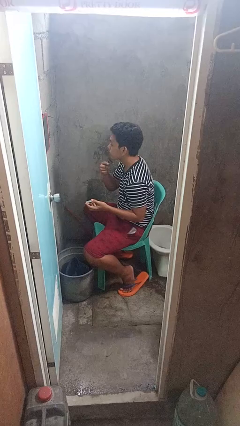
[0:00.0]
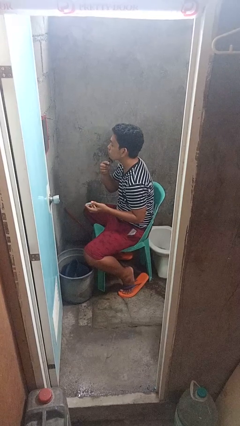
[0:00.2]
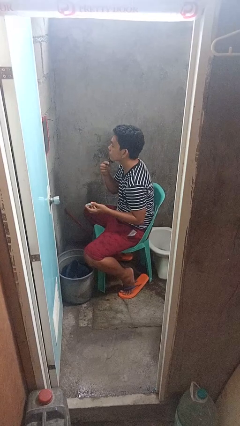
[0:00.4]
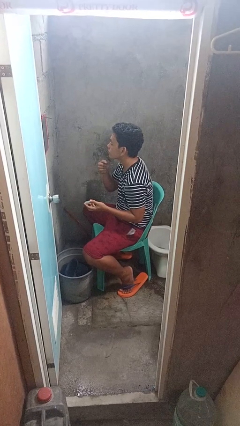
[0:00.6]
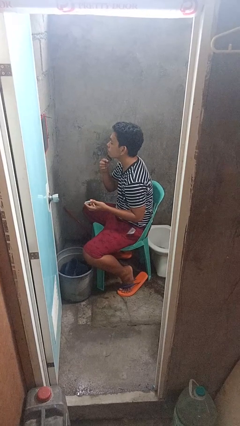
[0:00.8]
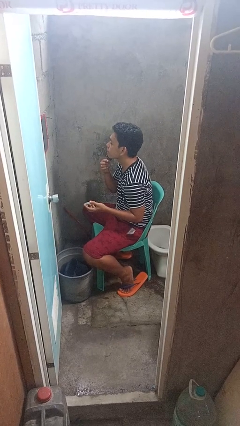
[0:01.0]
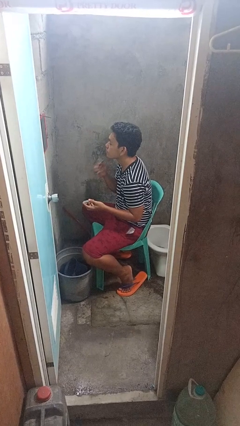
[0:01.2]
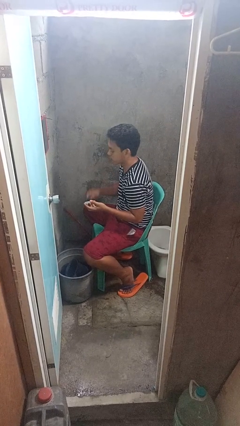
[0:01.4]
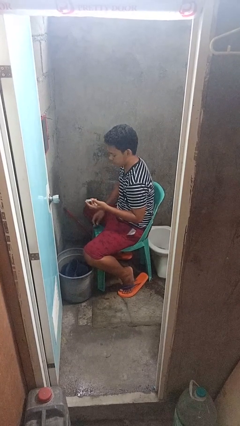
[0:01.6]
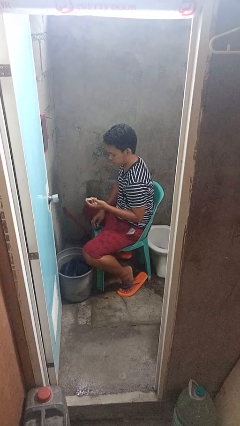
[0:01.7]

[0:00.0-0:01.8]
person shaves face

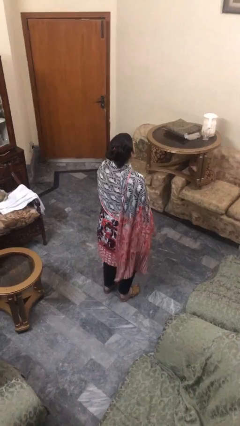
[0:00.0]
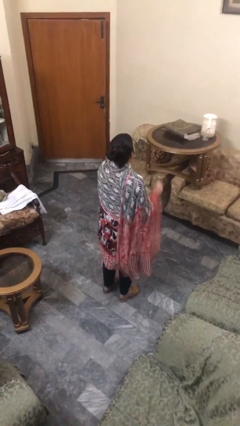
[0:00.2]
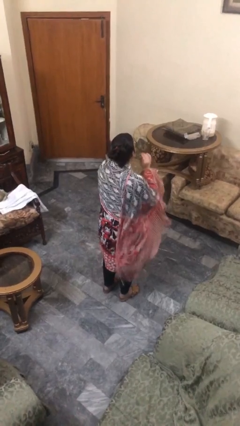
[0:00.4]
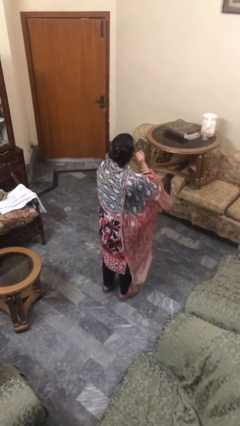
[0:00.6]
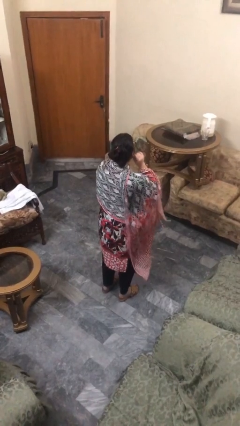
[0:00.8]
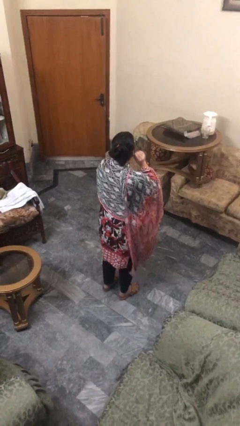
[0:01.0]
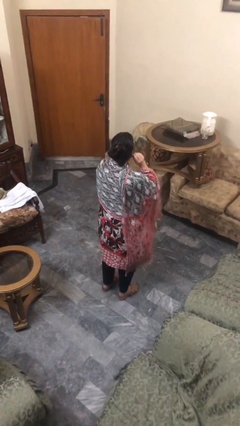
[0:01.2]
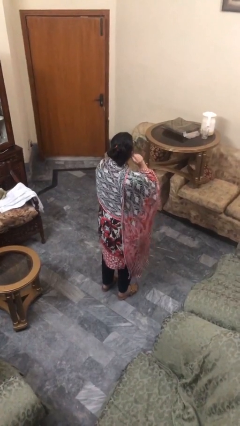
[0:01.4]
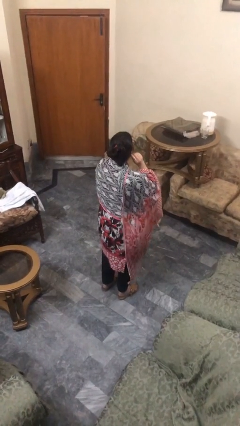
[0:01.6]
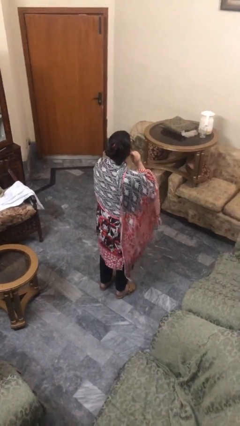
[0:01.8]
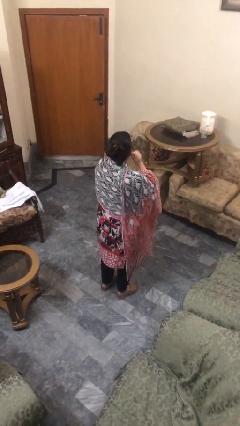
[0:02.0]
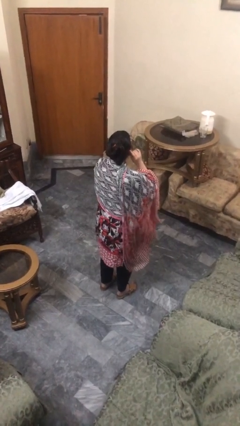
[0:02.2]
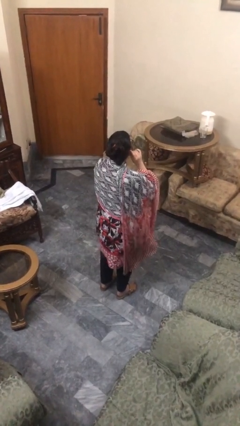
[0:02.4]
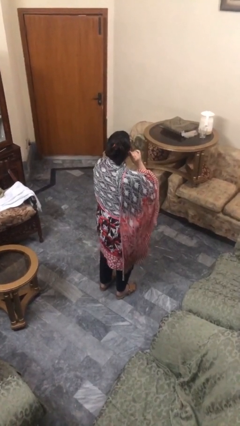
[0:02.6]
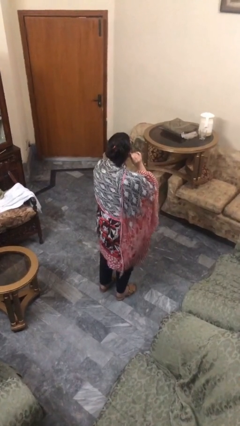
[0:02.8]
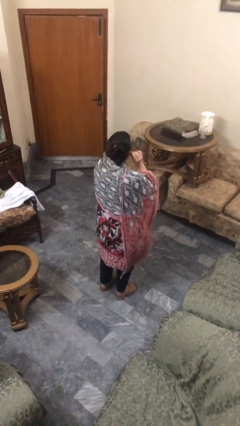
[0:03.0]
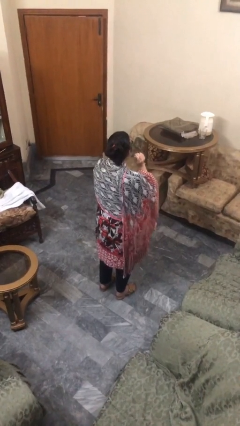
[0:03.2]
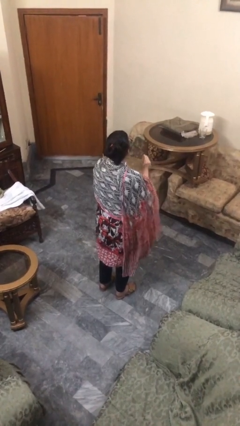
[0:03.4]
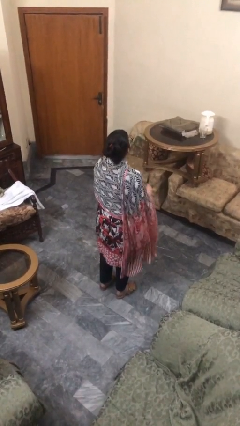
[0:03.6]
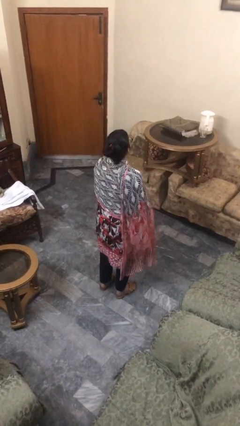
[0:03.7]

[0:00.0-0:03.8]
person touches earlobe

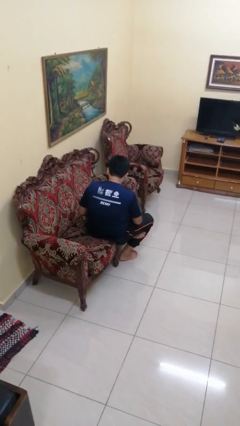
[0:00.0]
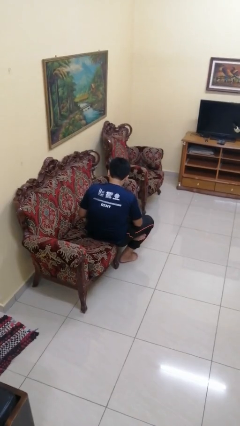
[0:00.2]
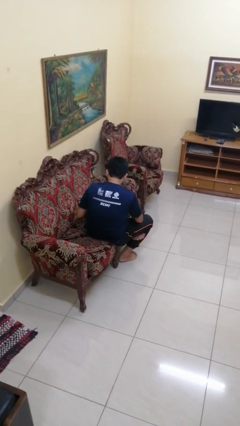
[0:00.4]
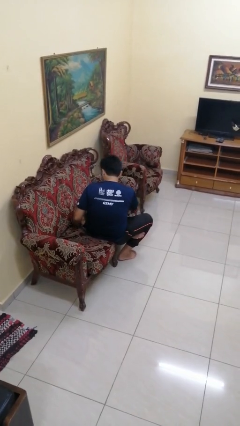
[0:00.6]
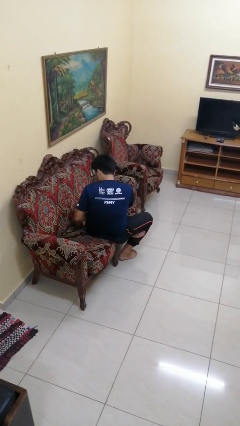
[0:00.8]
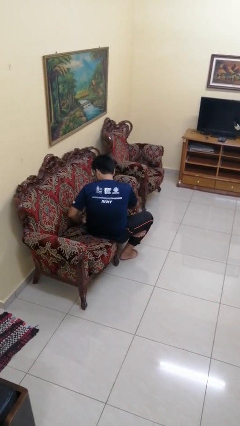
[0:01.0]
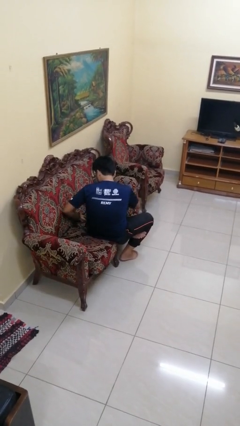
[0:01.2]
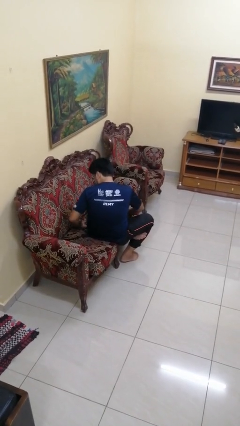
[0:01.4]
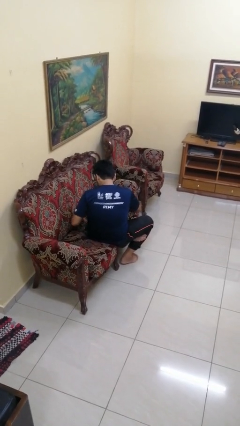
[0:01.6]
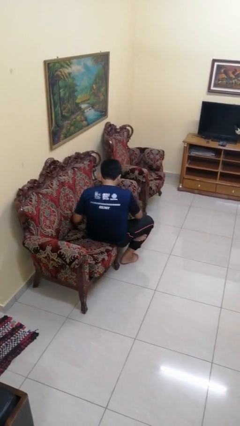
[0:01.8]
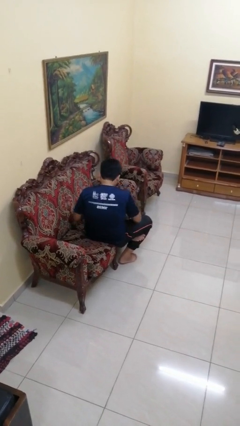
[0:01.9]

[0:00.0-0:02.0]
person searches in couch

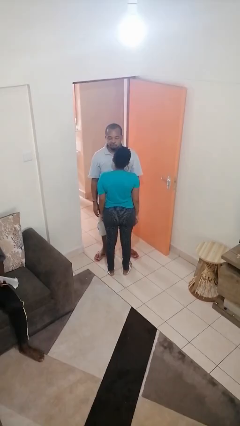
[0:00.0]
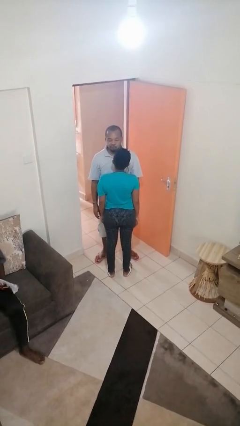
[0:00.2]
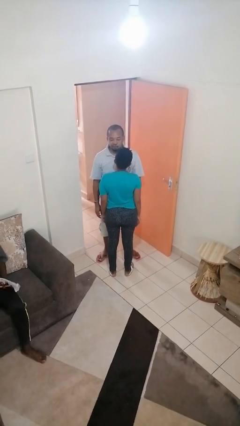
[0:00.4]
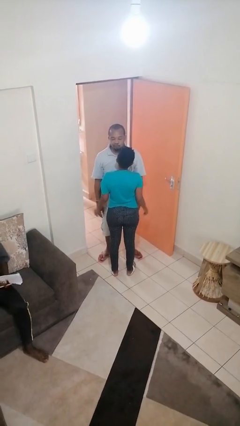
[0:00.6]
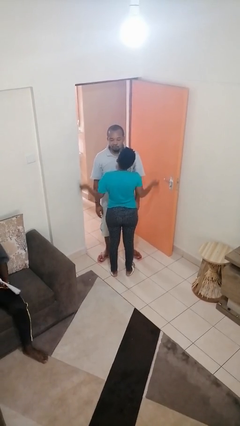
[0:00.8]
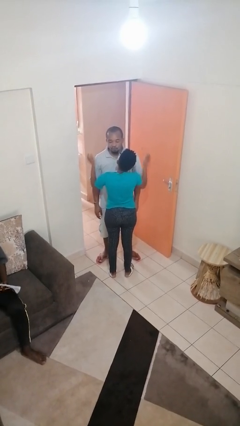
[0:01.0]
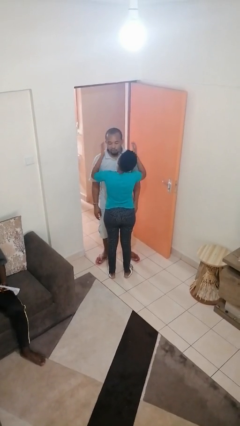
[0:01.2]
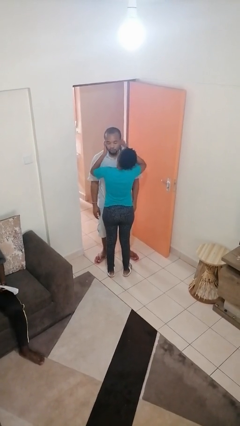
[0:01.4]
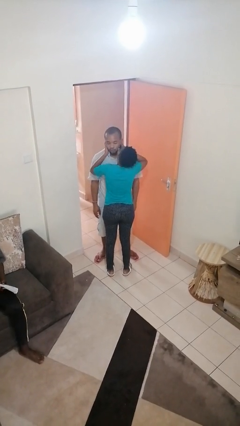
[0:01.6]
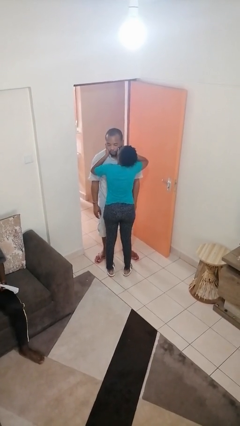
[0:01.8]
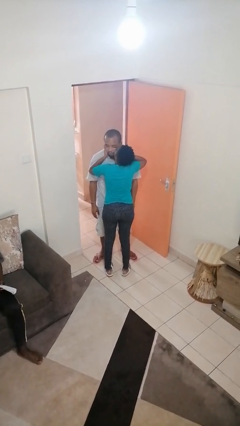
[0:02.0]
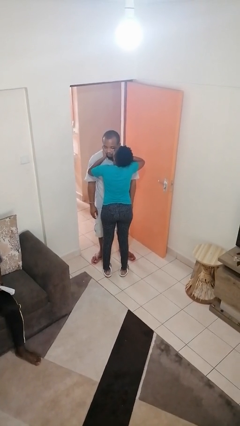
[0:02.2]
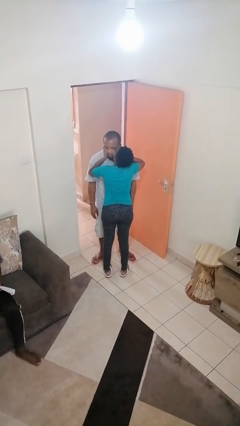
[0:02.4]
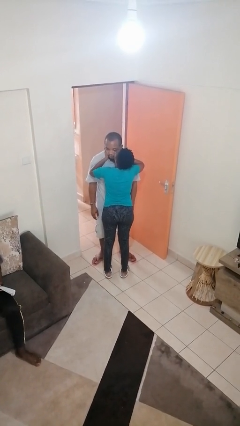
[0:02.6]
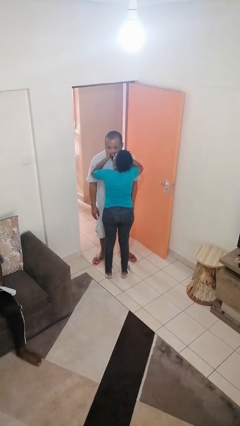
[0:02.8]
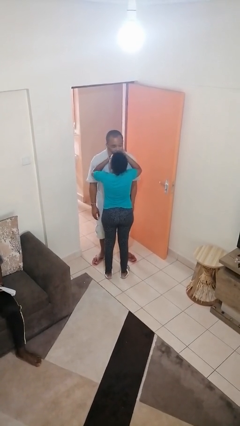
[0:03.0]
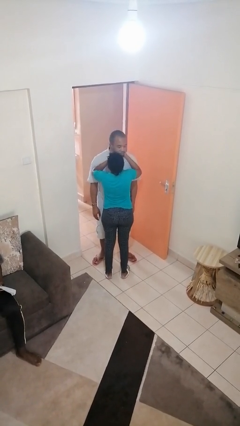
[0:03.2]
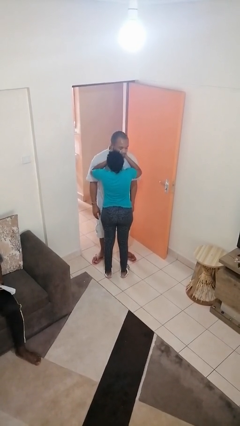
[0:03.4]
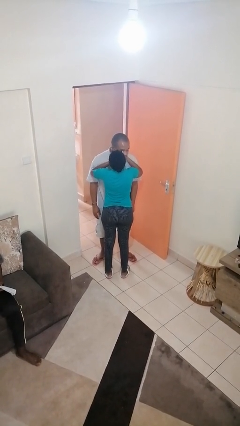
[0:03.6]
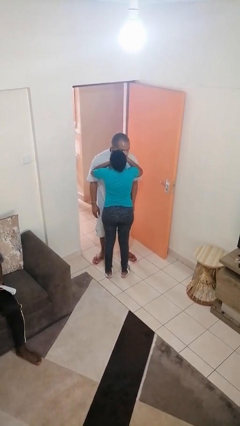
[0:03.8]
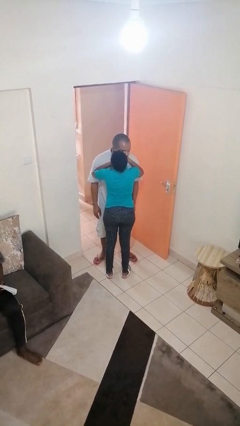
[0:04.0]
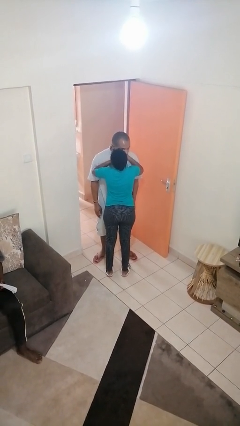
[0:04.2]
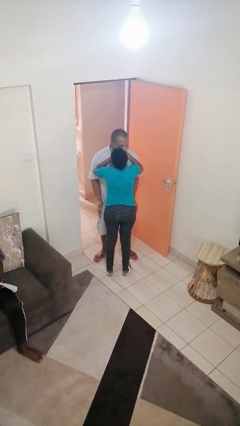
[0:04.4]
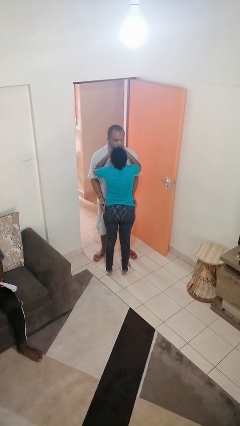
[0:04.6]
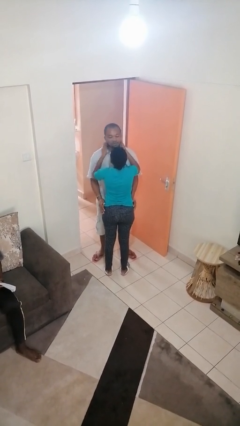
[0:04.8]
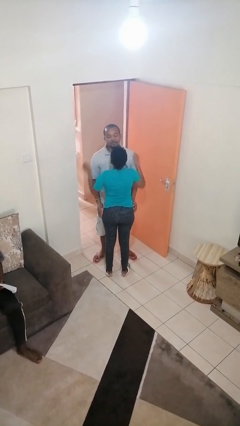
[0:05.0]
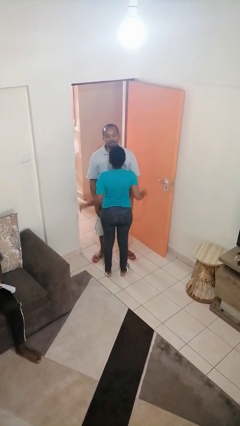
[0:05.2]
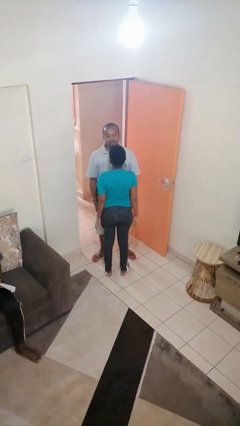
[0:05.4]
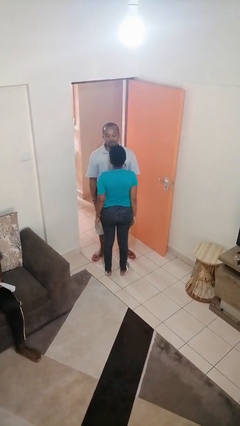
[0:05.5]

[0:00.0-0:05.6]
person kisses cheek of person

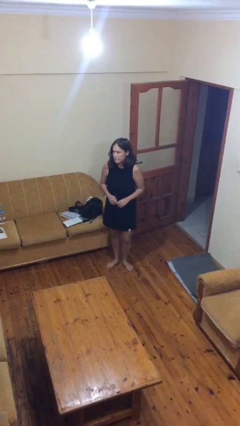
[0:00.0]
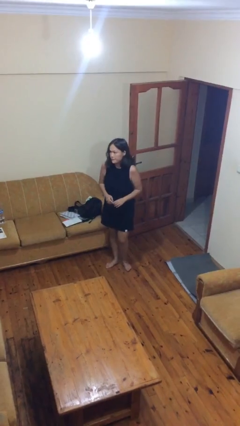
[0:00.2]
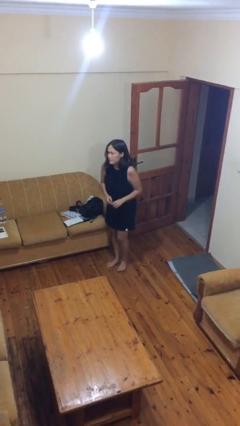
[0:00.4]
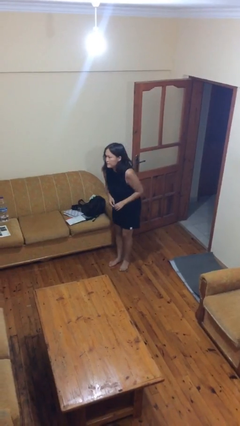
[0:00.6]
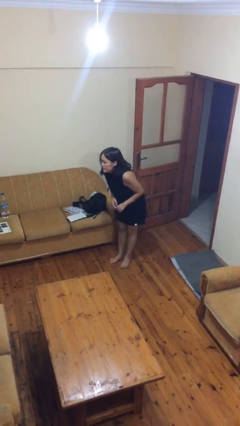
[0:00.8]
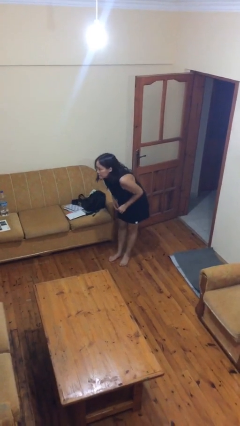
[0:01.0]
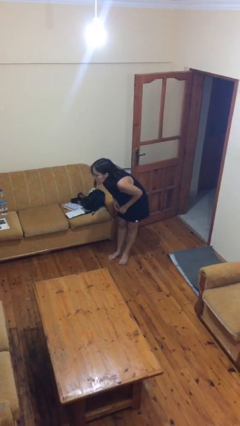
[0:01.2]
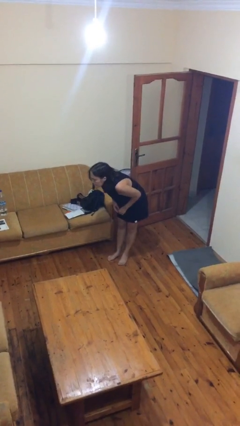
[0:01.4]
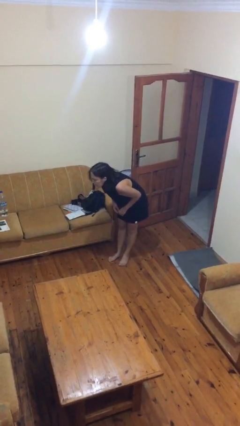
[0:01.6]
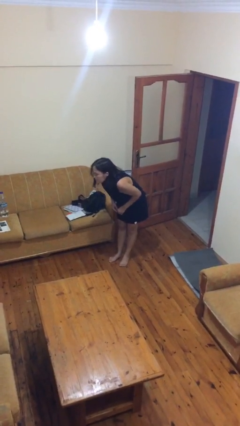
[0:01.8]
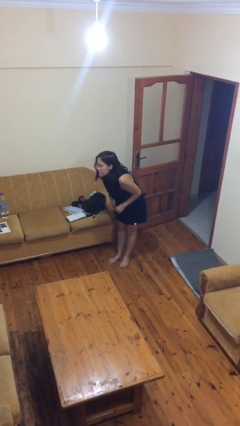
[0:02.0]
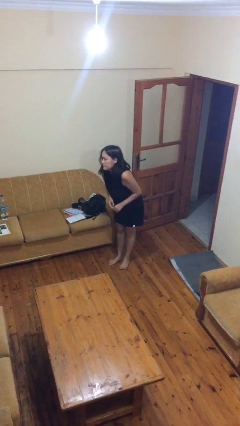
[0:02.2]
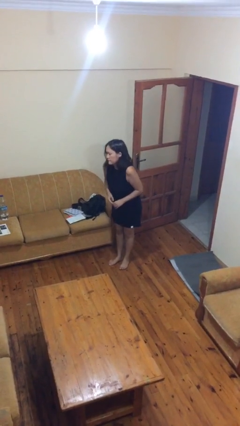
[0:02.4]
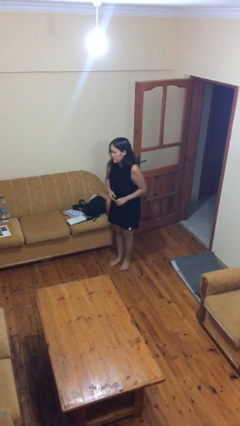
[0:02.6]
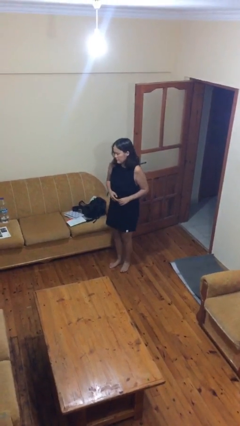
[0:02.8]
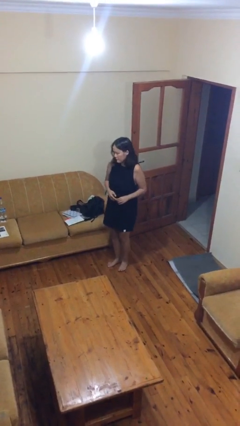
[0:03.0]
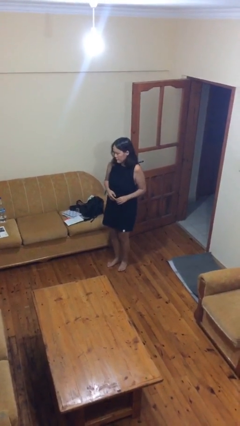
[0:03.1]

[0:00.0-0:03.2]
person bows

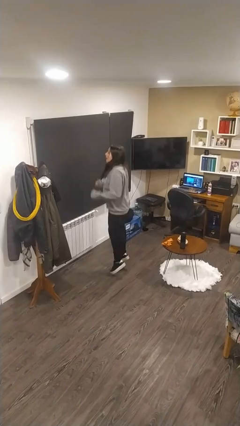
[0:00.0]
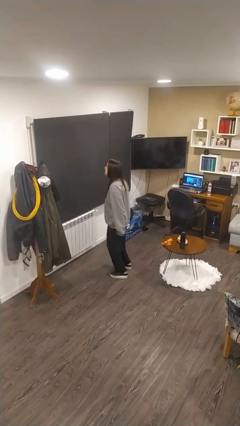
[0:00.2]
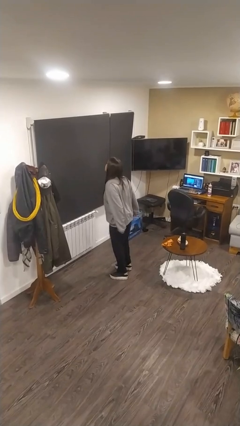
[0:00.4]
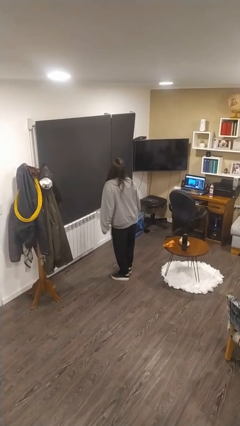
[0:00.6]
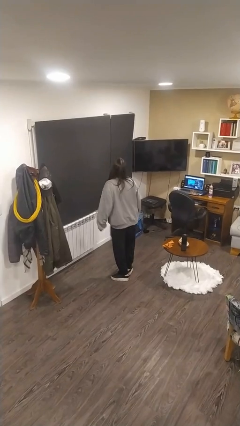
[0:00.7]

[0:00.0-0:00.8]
person jumps

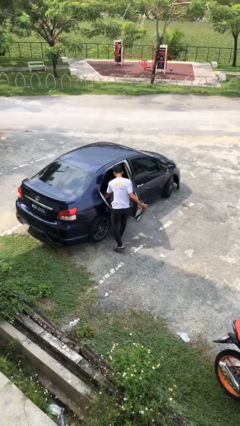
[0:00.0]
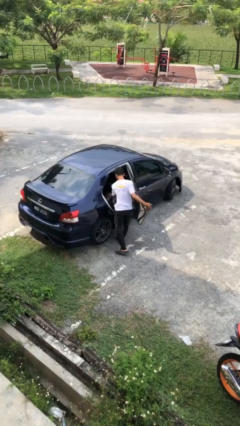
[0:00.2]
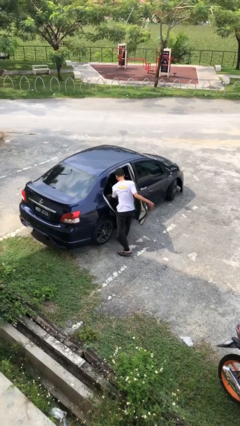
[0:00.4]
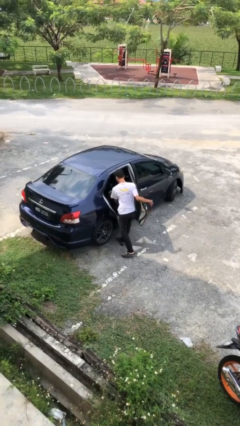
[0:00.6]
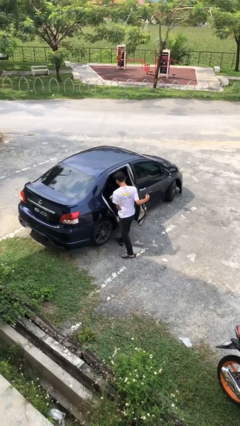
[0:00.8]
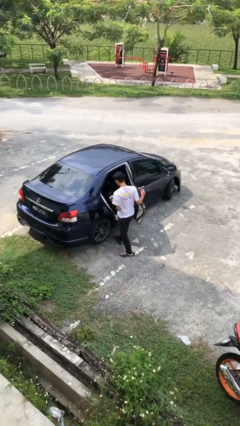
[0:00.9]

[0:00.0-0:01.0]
person unloads car
